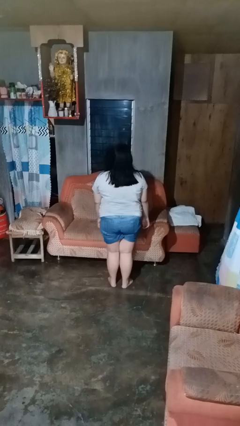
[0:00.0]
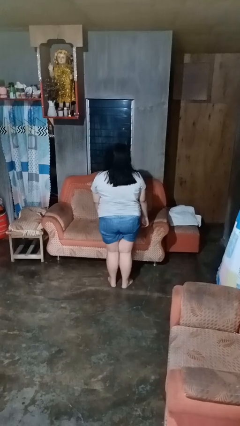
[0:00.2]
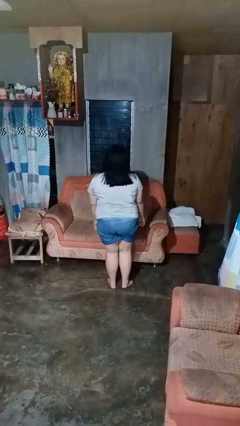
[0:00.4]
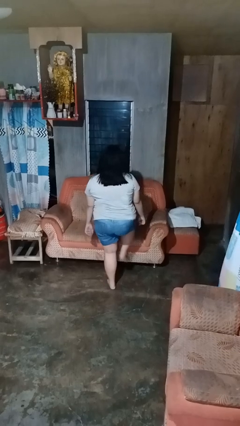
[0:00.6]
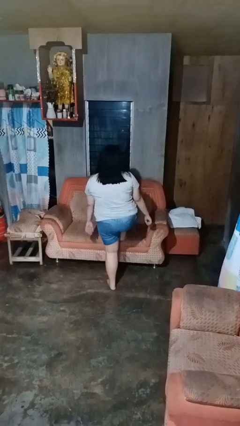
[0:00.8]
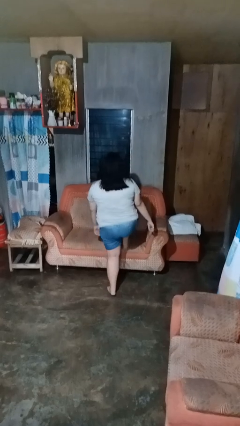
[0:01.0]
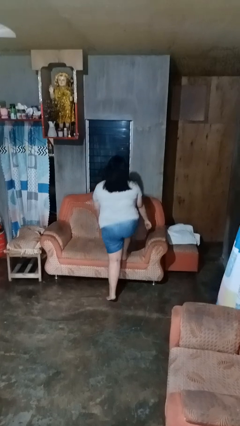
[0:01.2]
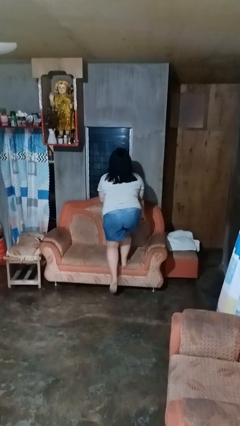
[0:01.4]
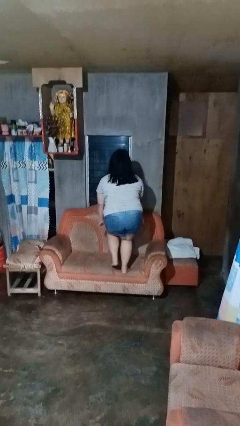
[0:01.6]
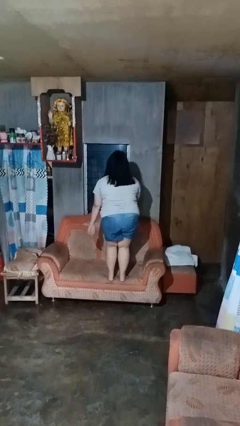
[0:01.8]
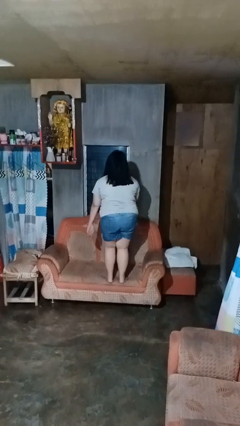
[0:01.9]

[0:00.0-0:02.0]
person climbs on couch

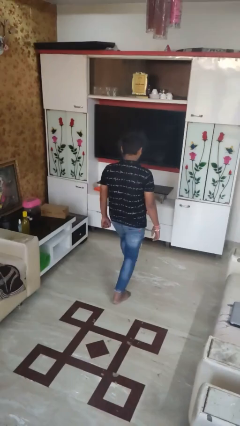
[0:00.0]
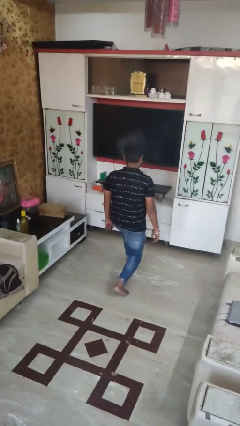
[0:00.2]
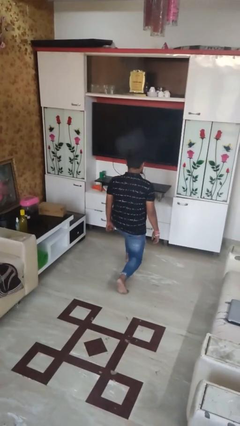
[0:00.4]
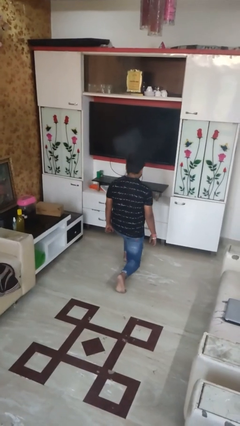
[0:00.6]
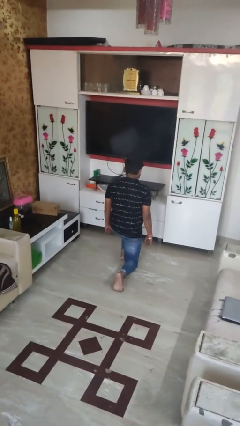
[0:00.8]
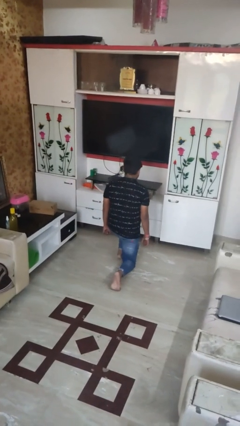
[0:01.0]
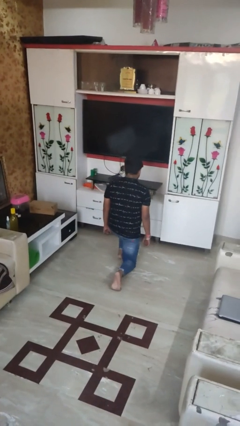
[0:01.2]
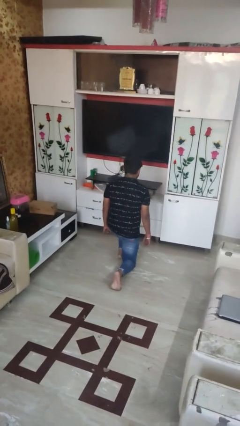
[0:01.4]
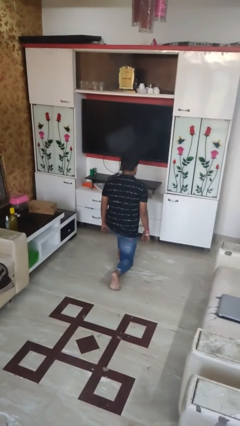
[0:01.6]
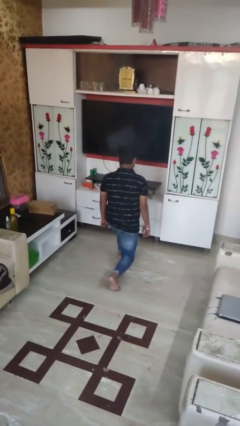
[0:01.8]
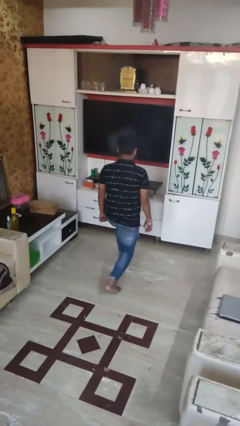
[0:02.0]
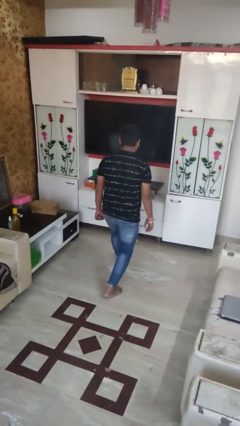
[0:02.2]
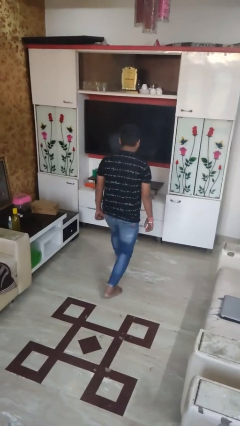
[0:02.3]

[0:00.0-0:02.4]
person exercises with lunges

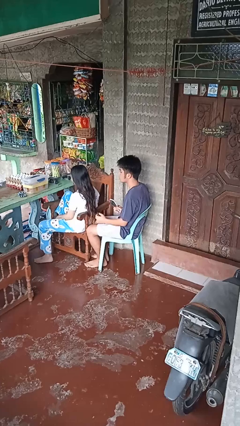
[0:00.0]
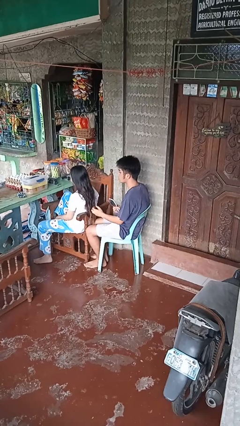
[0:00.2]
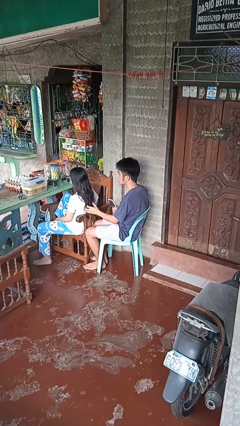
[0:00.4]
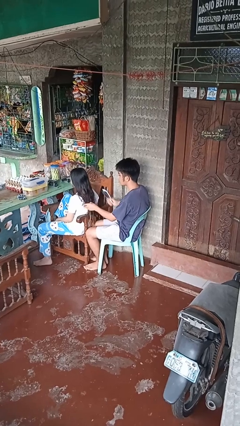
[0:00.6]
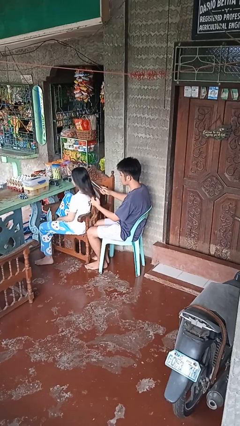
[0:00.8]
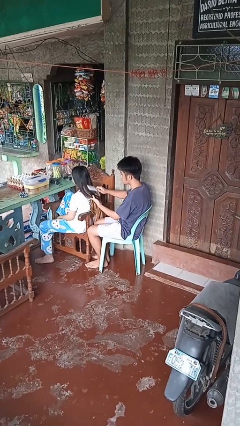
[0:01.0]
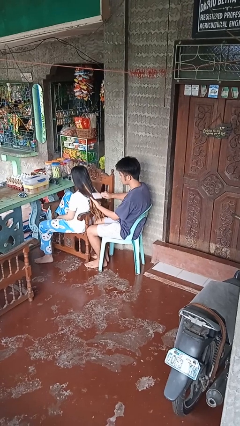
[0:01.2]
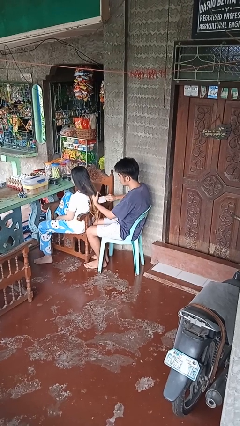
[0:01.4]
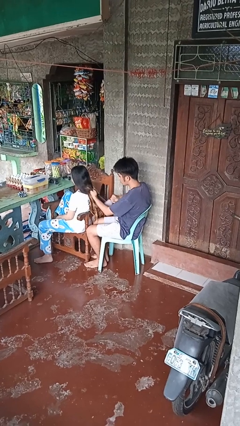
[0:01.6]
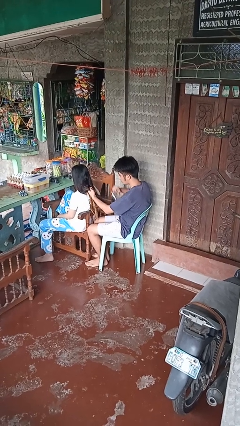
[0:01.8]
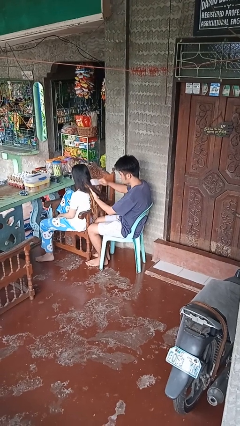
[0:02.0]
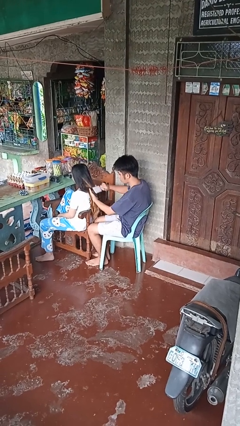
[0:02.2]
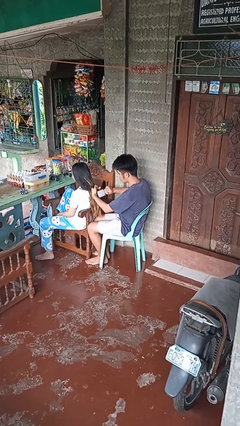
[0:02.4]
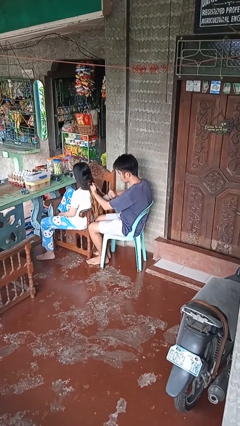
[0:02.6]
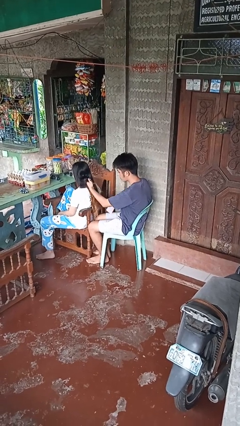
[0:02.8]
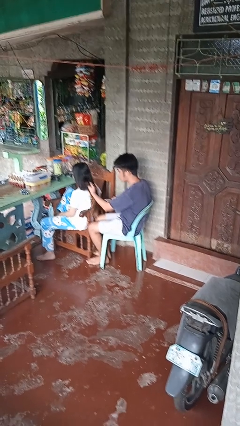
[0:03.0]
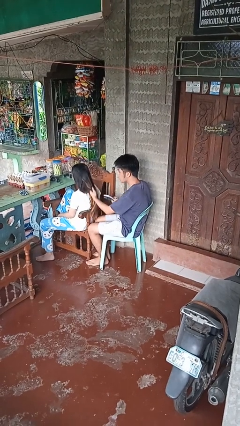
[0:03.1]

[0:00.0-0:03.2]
person brushes hair of person

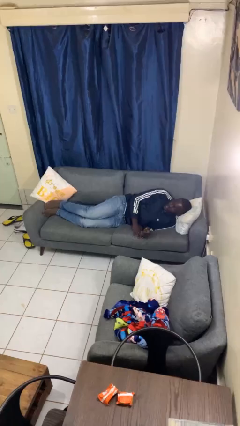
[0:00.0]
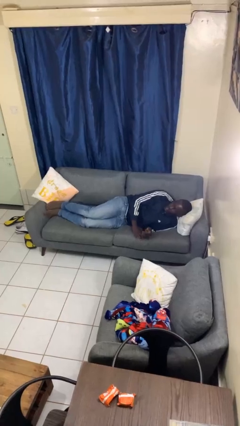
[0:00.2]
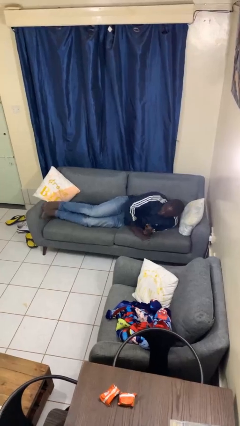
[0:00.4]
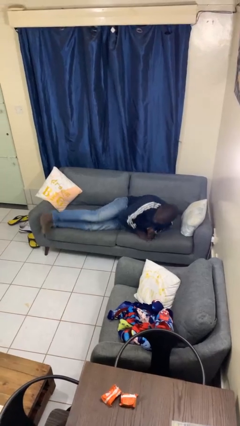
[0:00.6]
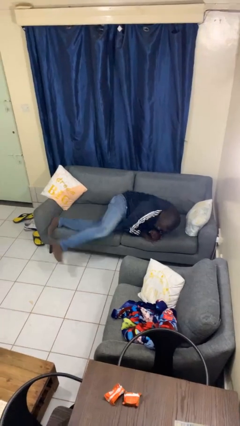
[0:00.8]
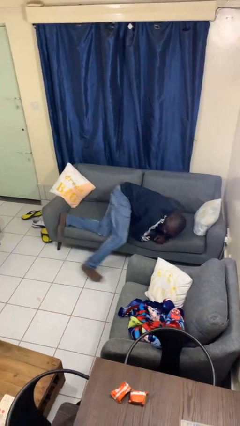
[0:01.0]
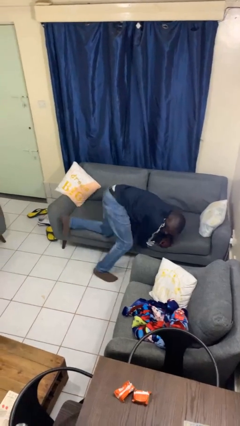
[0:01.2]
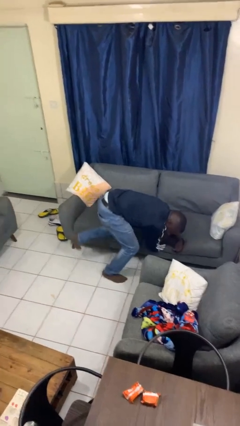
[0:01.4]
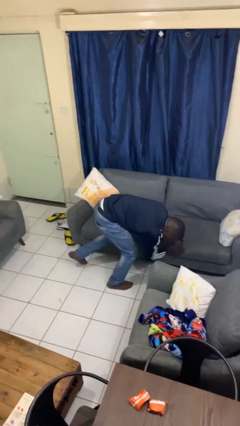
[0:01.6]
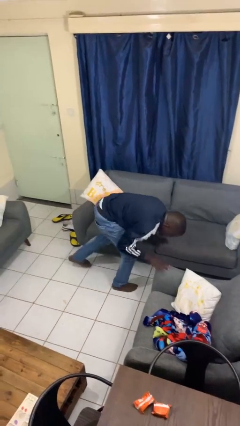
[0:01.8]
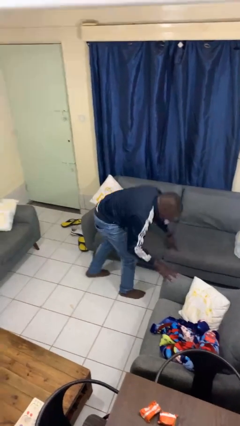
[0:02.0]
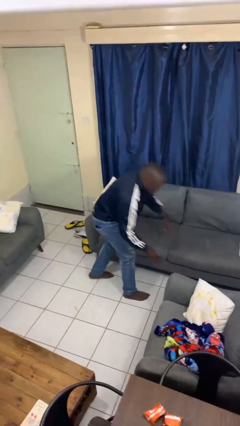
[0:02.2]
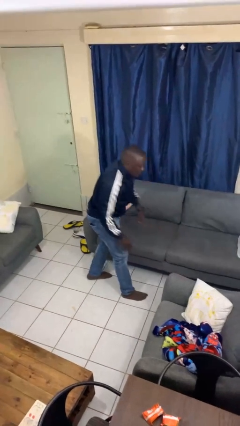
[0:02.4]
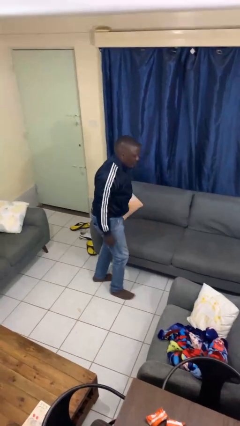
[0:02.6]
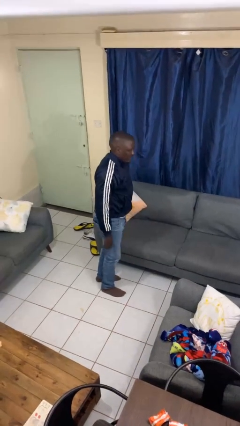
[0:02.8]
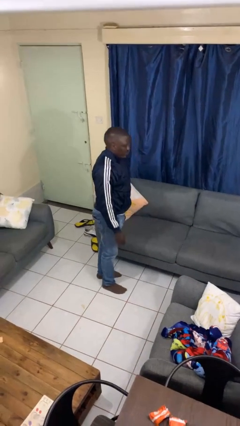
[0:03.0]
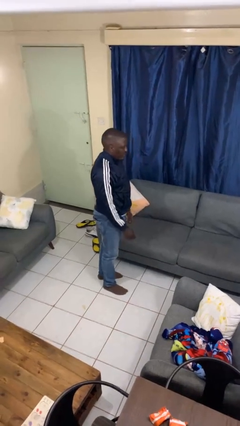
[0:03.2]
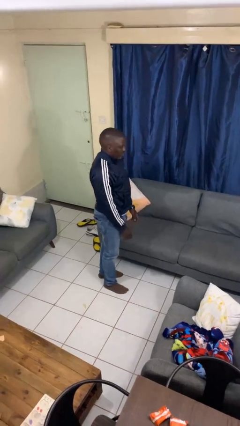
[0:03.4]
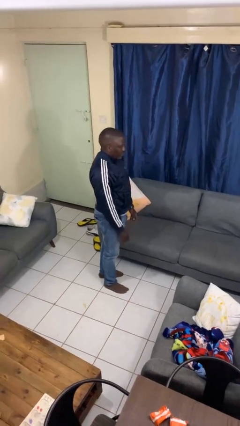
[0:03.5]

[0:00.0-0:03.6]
person stands up

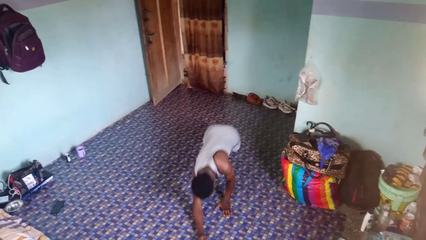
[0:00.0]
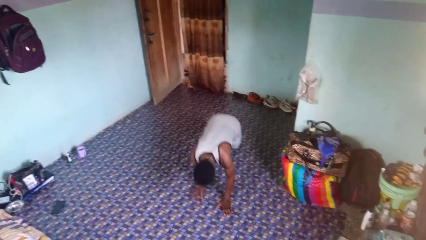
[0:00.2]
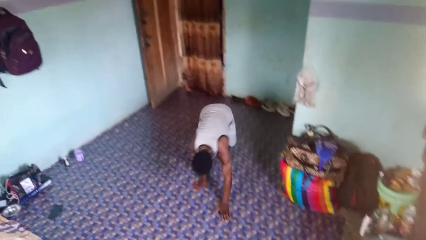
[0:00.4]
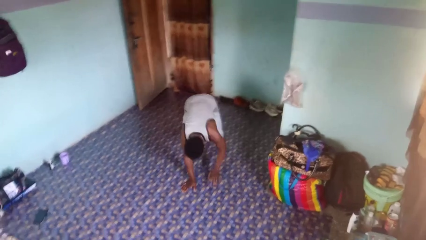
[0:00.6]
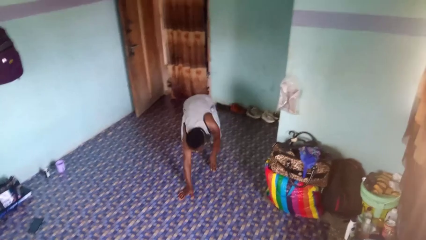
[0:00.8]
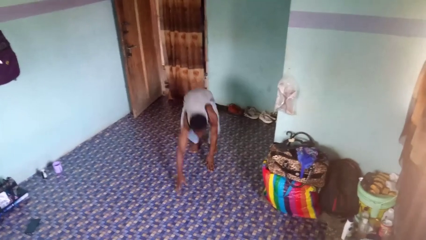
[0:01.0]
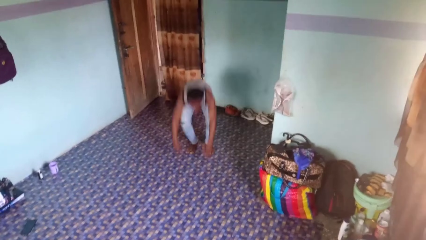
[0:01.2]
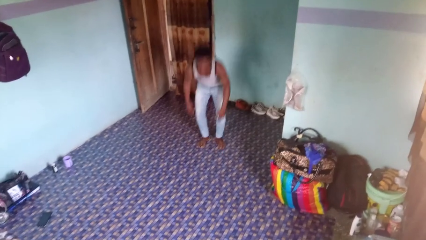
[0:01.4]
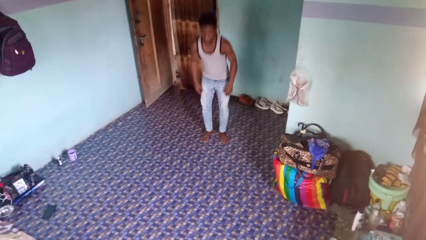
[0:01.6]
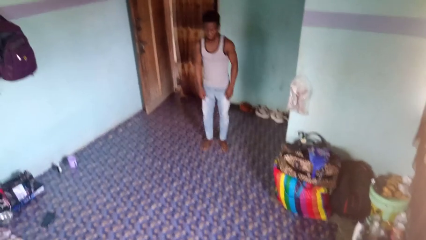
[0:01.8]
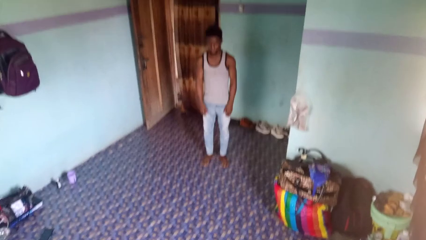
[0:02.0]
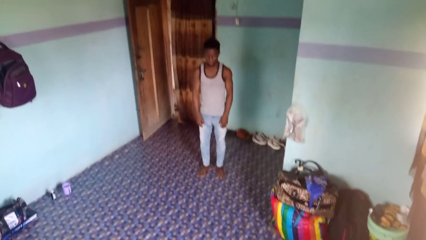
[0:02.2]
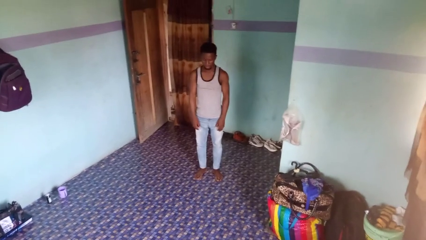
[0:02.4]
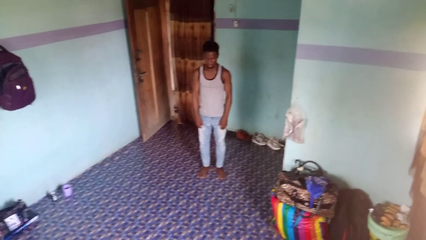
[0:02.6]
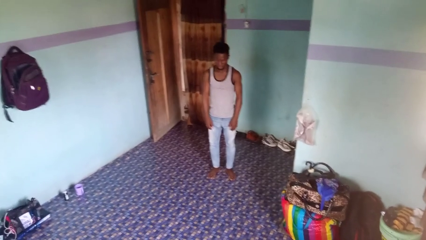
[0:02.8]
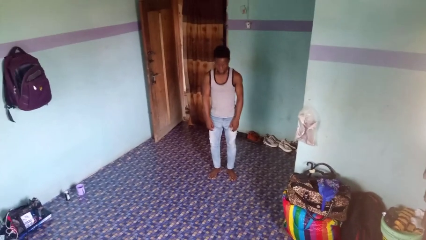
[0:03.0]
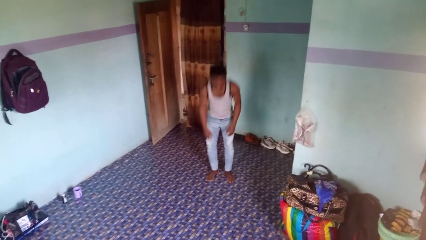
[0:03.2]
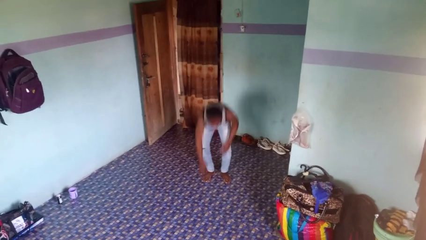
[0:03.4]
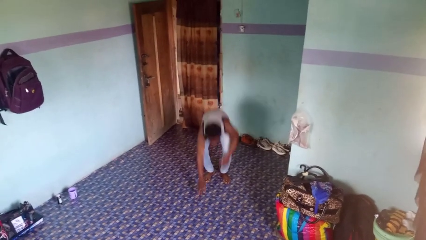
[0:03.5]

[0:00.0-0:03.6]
person stands up from floor

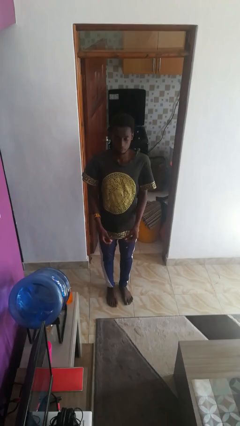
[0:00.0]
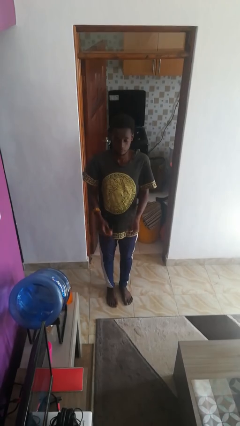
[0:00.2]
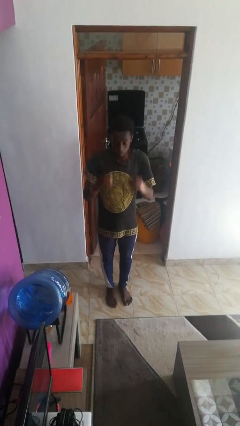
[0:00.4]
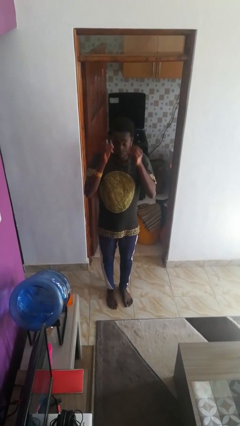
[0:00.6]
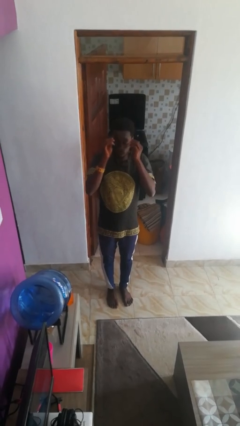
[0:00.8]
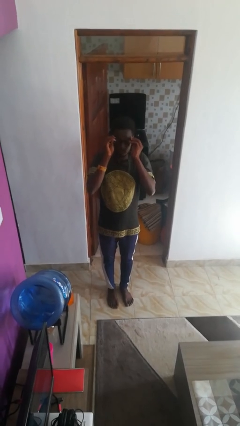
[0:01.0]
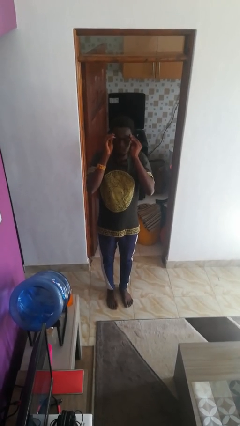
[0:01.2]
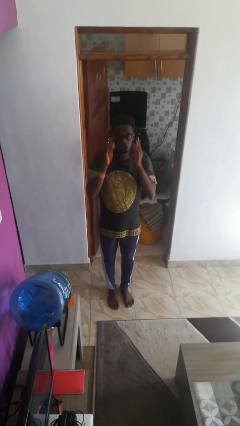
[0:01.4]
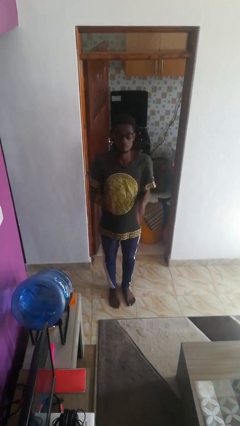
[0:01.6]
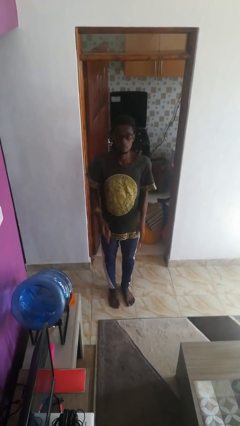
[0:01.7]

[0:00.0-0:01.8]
person puts on glasses

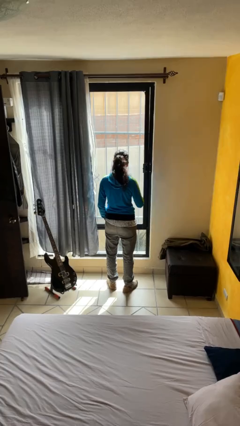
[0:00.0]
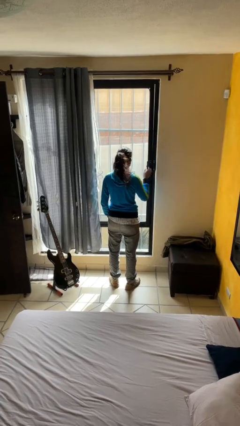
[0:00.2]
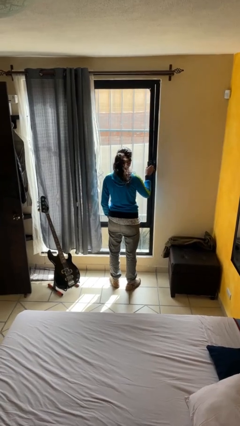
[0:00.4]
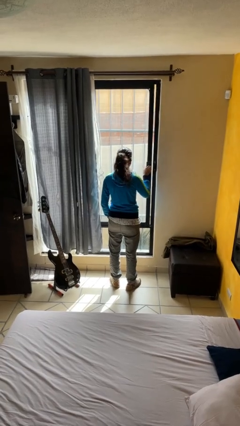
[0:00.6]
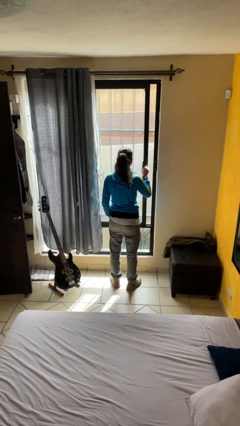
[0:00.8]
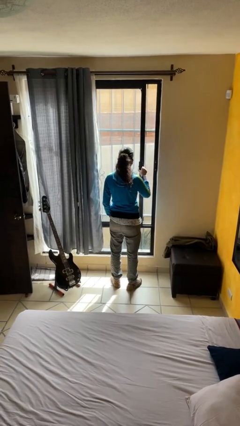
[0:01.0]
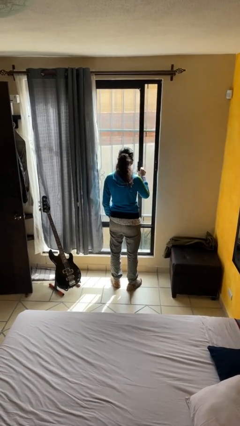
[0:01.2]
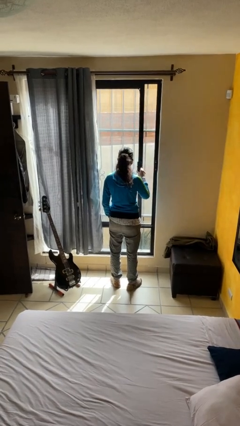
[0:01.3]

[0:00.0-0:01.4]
person opens home window
